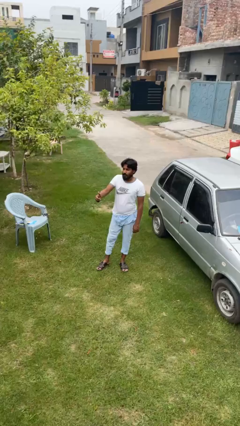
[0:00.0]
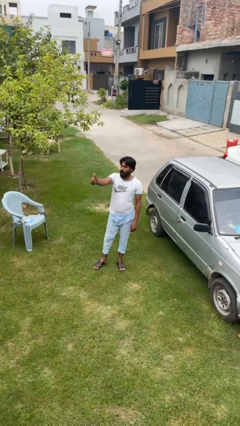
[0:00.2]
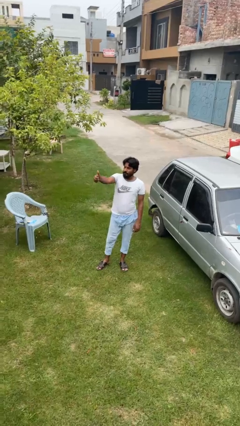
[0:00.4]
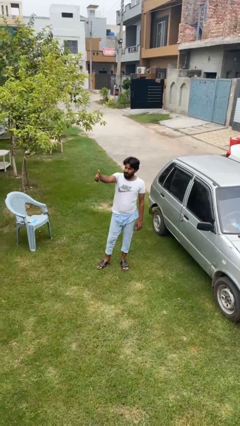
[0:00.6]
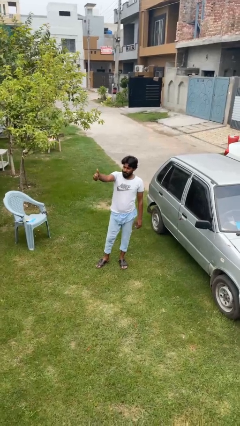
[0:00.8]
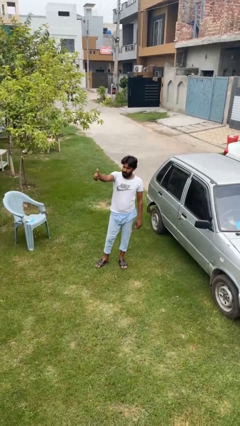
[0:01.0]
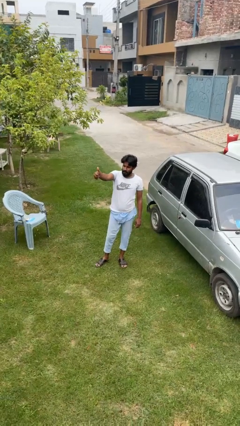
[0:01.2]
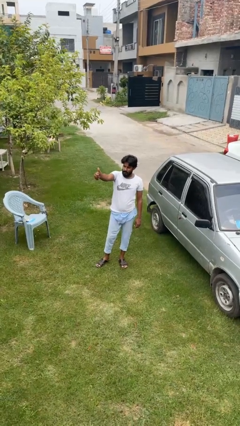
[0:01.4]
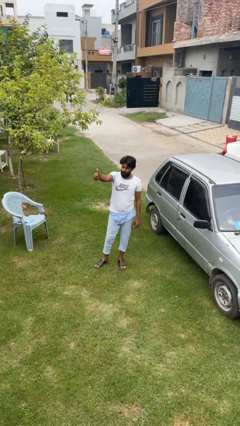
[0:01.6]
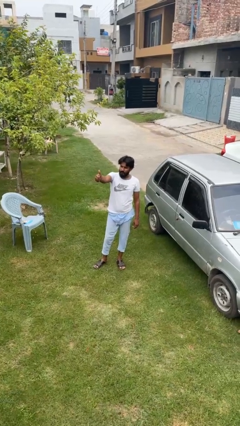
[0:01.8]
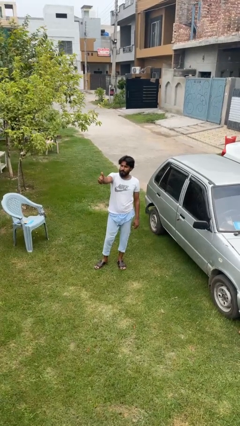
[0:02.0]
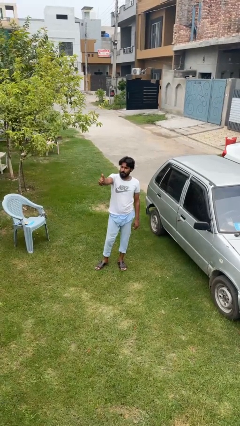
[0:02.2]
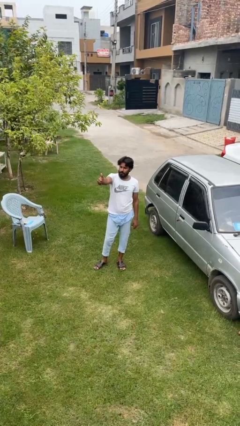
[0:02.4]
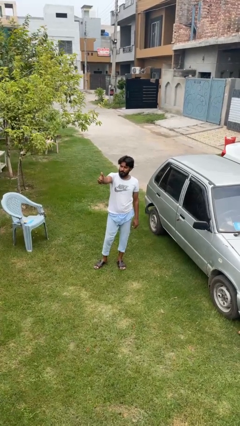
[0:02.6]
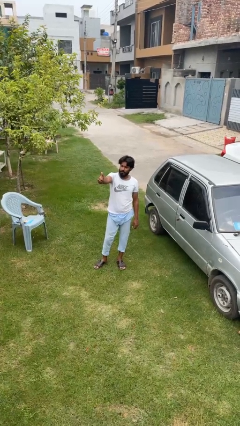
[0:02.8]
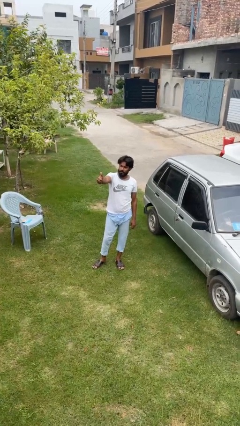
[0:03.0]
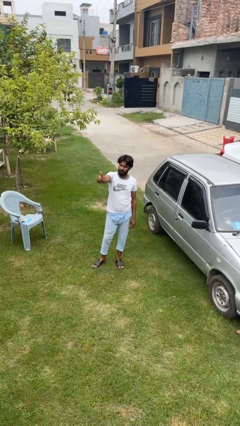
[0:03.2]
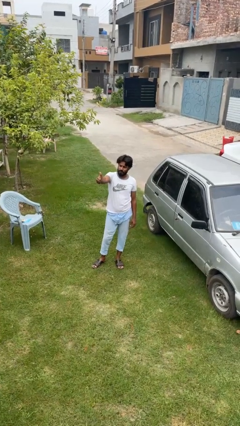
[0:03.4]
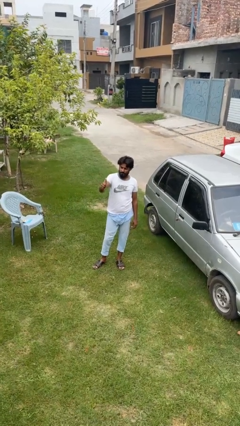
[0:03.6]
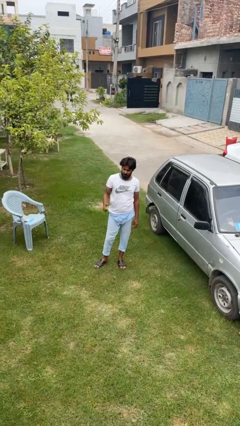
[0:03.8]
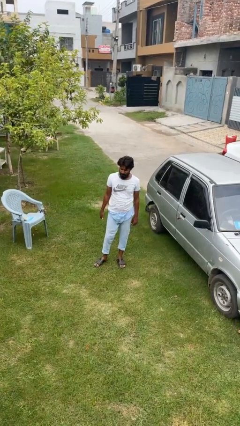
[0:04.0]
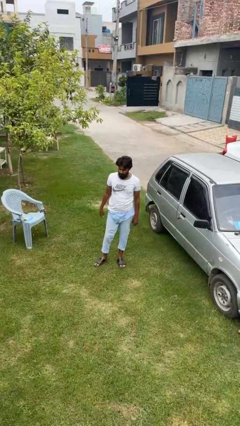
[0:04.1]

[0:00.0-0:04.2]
person gestures thumbs up

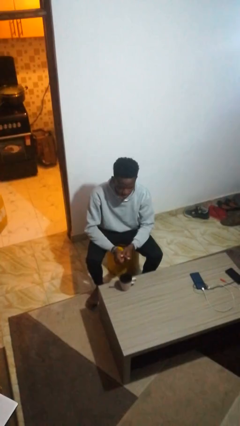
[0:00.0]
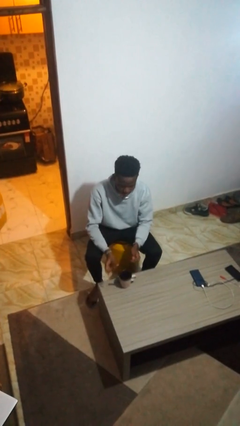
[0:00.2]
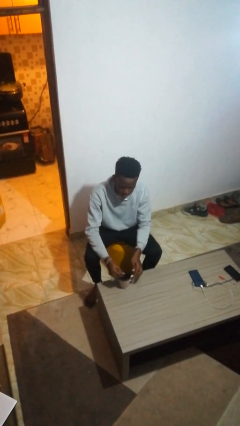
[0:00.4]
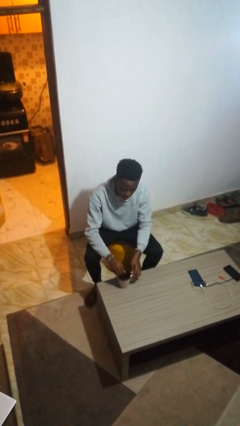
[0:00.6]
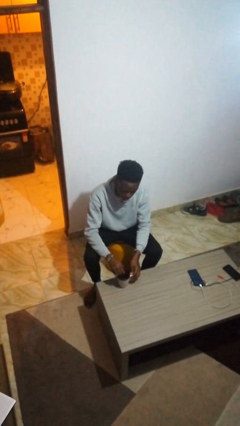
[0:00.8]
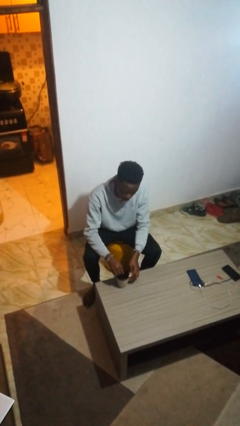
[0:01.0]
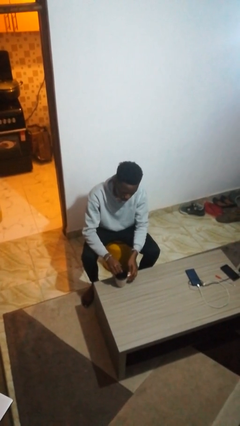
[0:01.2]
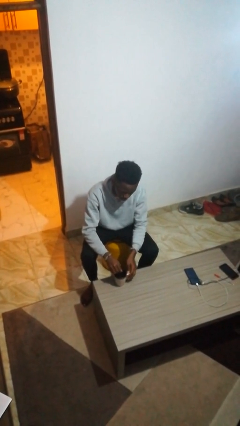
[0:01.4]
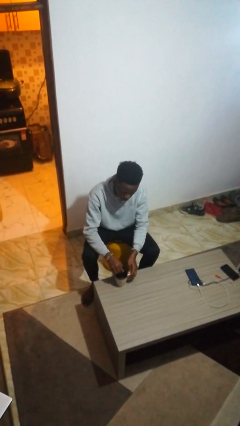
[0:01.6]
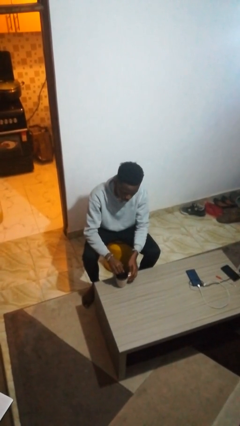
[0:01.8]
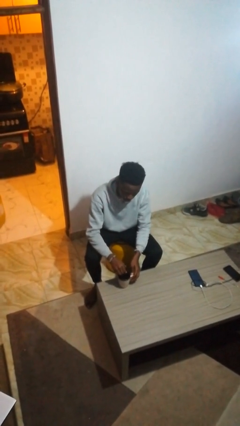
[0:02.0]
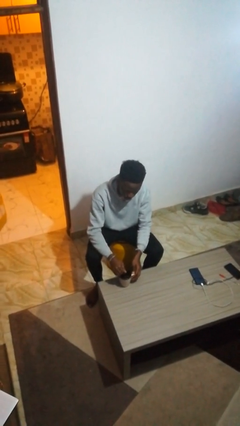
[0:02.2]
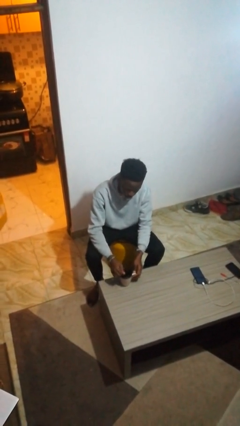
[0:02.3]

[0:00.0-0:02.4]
person stirs mug

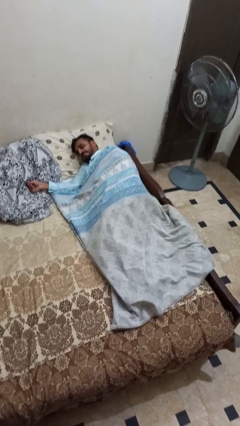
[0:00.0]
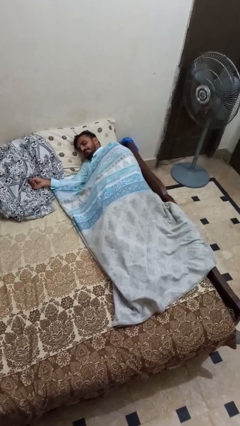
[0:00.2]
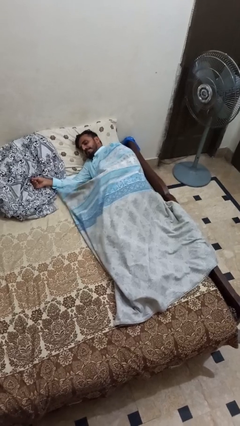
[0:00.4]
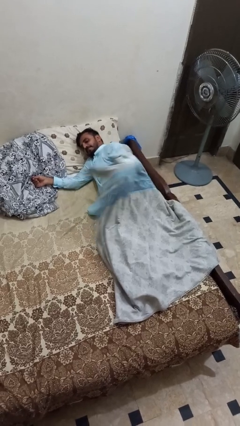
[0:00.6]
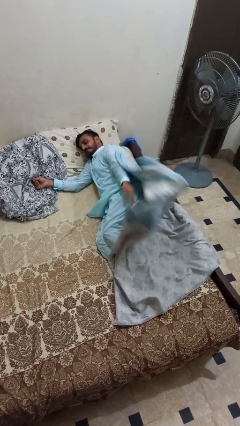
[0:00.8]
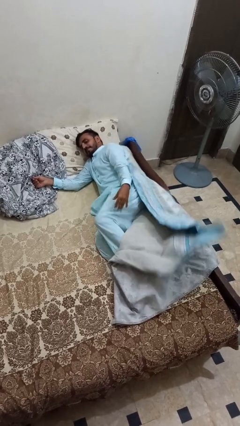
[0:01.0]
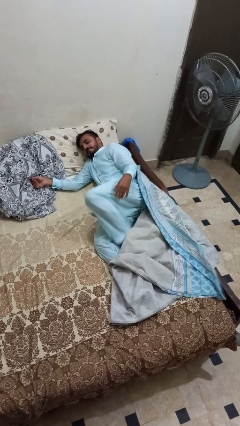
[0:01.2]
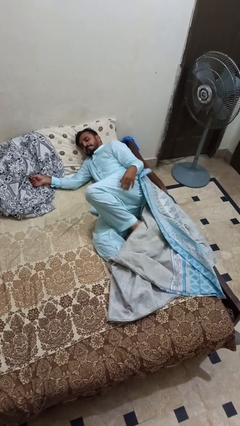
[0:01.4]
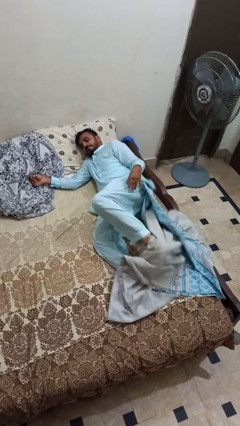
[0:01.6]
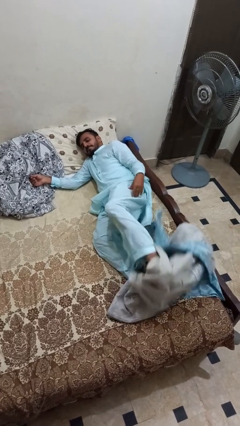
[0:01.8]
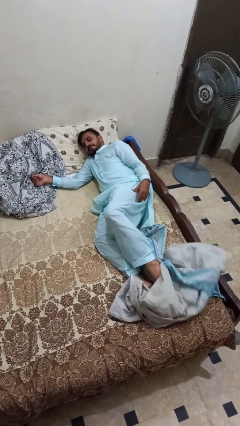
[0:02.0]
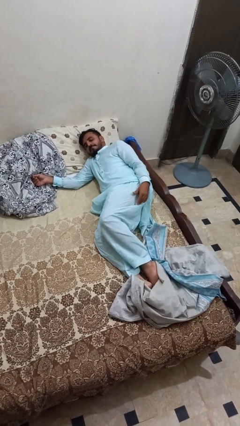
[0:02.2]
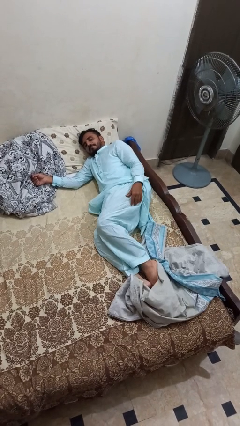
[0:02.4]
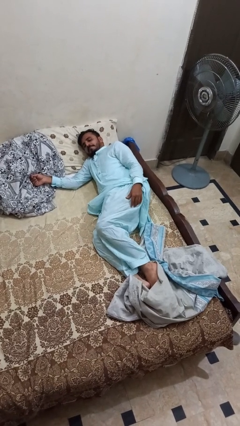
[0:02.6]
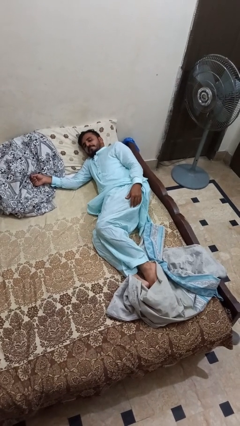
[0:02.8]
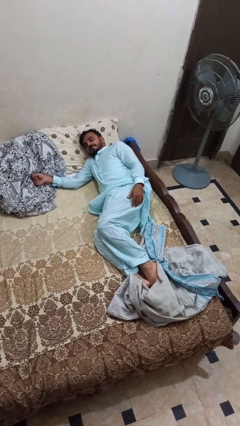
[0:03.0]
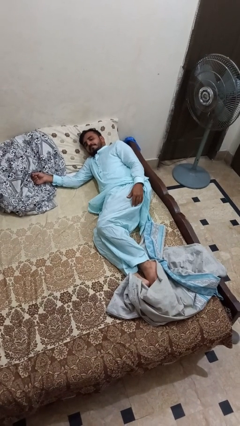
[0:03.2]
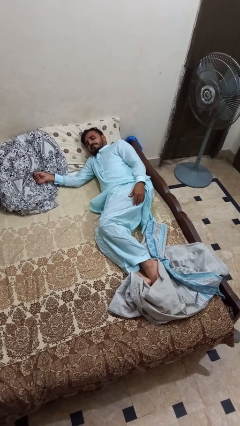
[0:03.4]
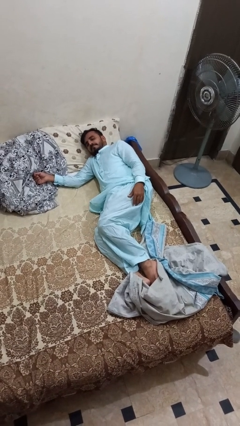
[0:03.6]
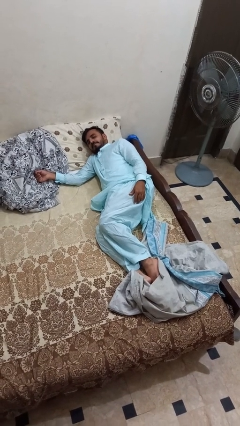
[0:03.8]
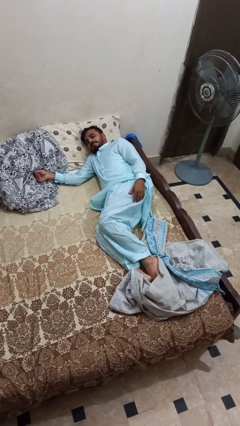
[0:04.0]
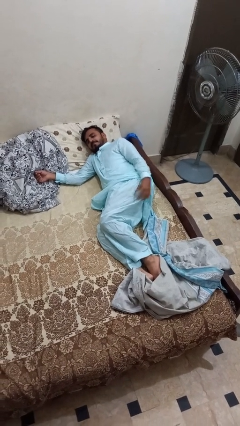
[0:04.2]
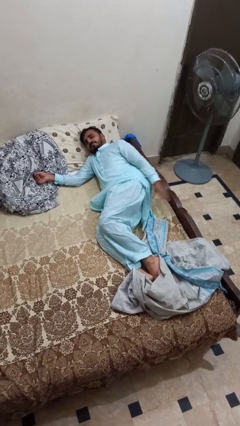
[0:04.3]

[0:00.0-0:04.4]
person uncovers with bedsheets

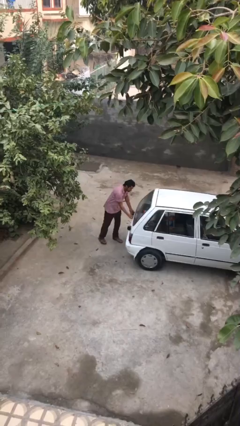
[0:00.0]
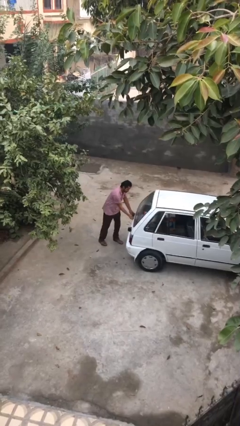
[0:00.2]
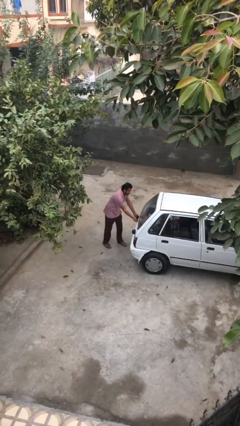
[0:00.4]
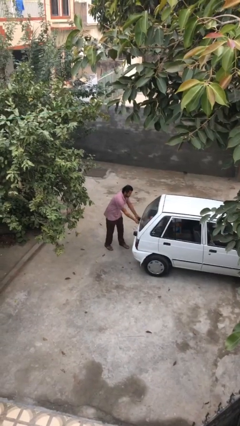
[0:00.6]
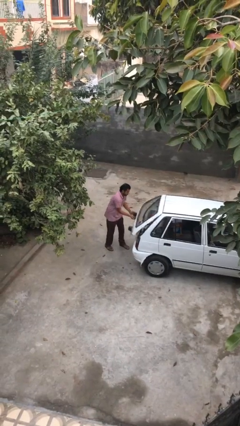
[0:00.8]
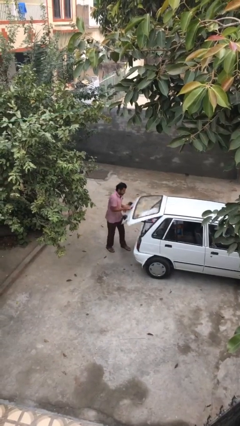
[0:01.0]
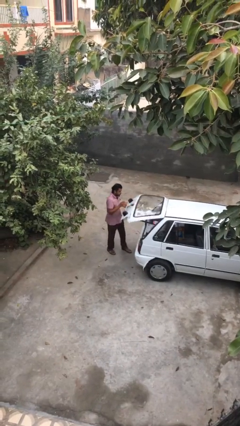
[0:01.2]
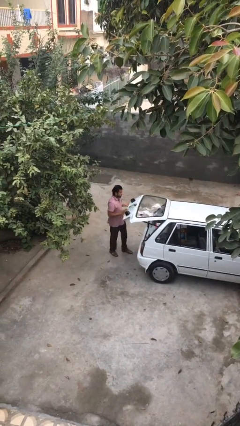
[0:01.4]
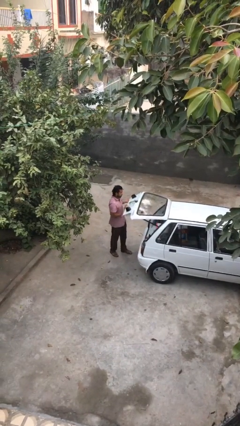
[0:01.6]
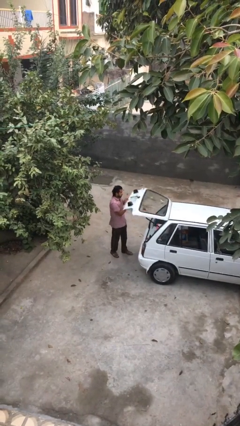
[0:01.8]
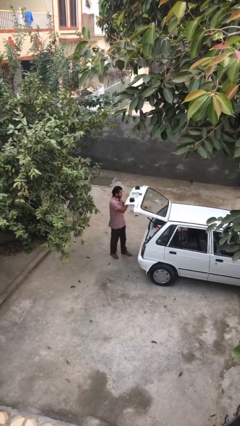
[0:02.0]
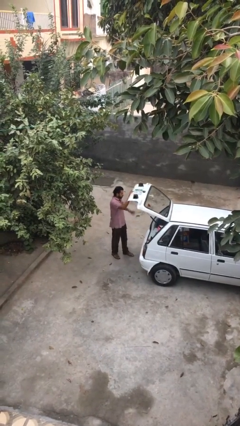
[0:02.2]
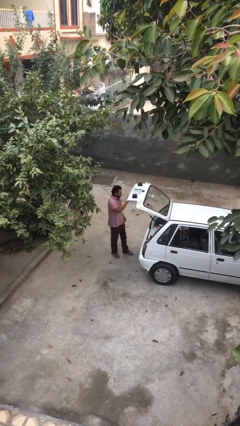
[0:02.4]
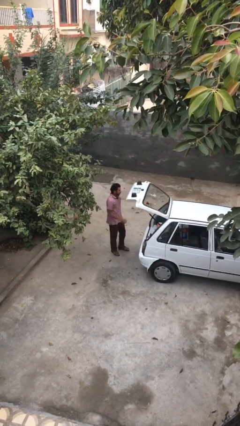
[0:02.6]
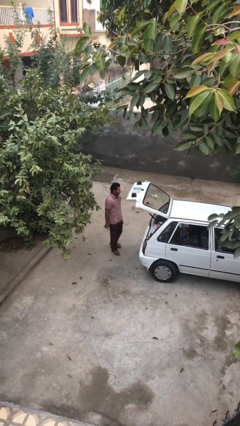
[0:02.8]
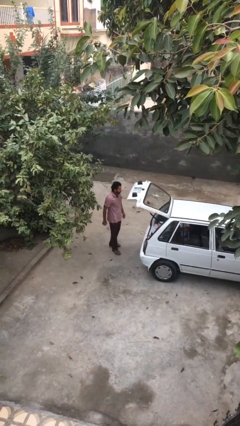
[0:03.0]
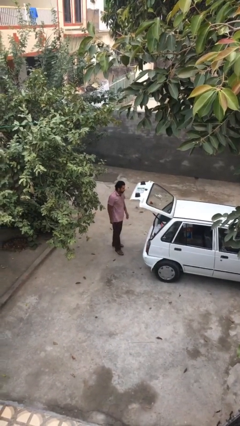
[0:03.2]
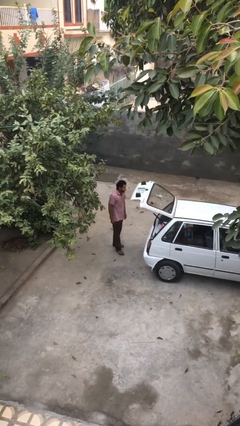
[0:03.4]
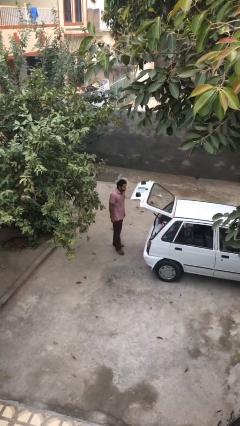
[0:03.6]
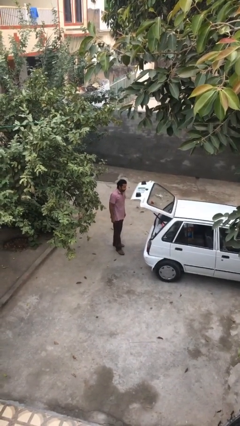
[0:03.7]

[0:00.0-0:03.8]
person opens car trunk

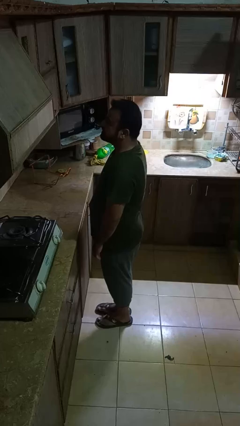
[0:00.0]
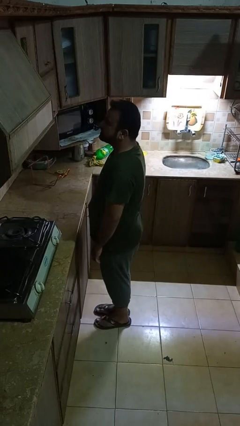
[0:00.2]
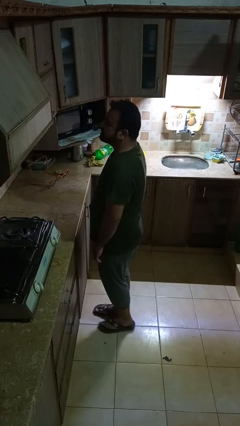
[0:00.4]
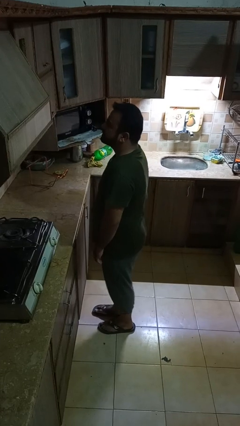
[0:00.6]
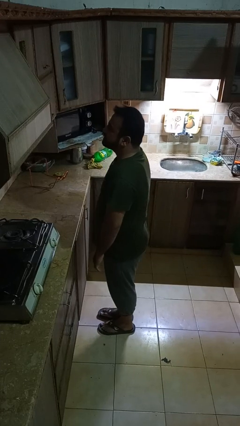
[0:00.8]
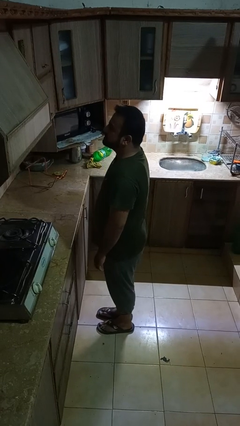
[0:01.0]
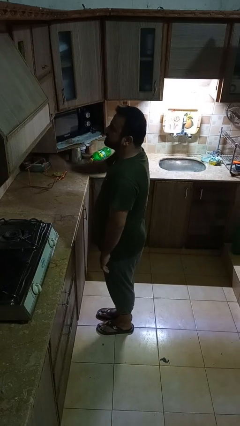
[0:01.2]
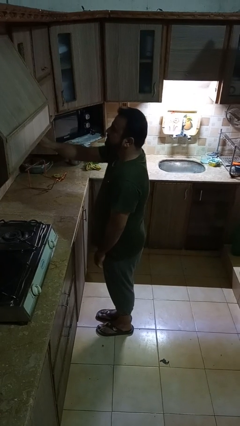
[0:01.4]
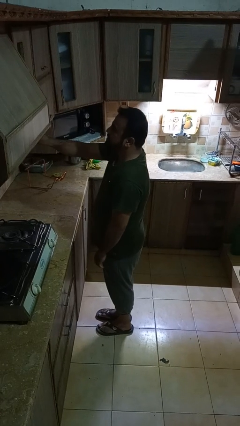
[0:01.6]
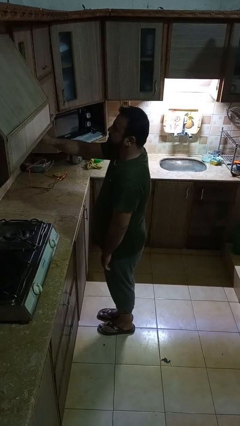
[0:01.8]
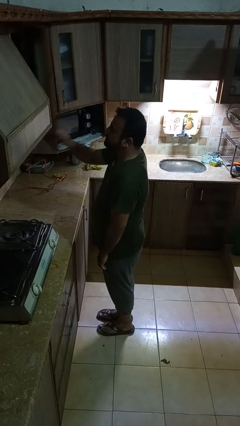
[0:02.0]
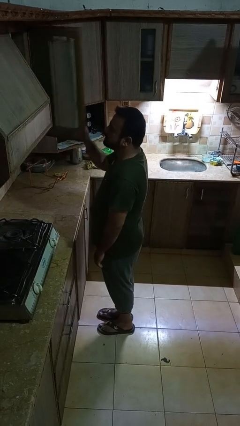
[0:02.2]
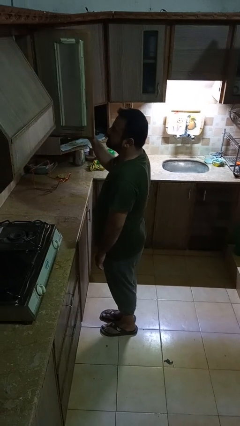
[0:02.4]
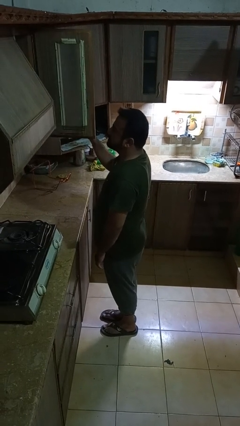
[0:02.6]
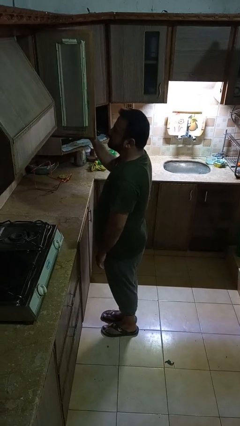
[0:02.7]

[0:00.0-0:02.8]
person opens cabinet
